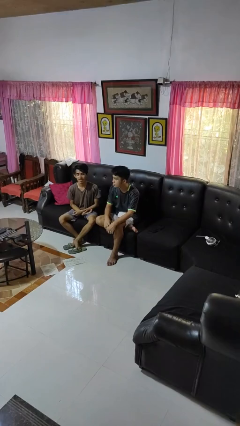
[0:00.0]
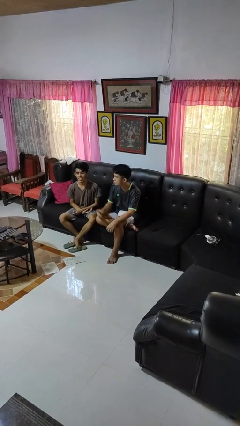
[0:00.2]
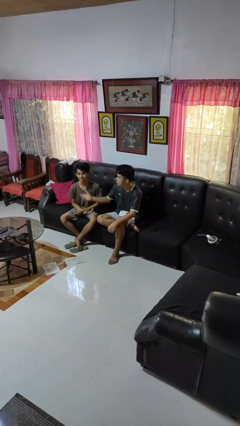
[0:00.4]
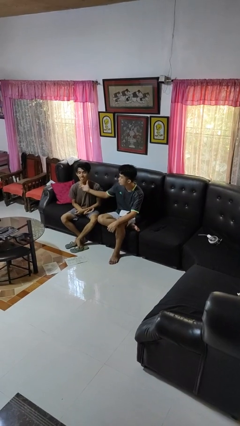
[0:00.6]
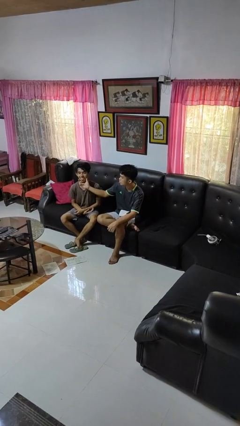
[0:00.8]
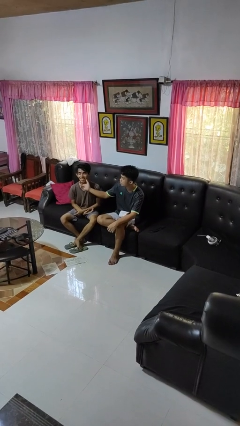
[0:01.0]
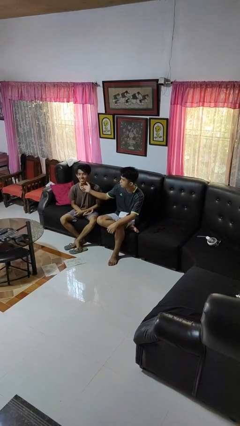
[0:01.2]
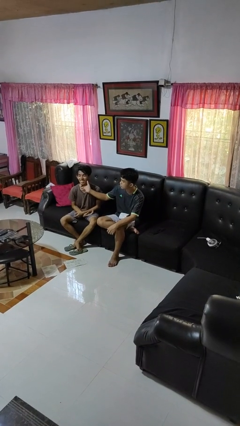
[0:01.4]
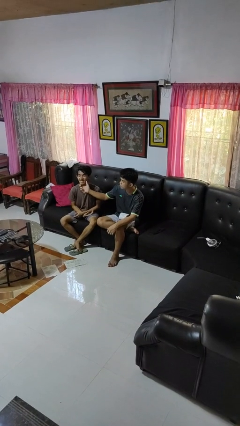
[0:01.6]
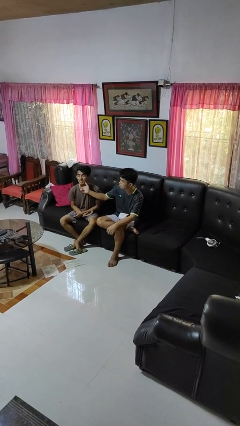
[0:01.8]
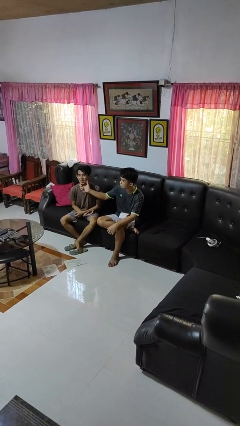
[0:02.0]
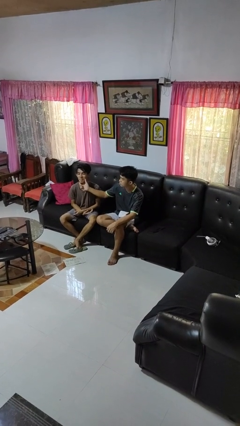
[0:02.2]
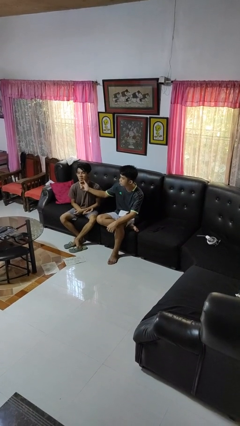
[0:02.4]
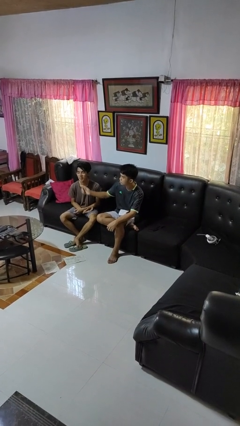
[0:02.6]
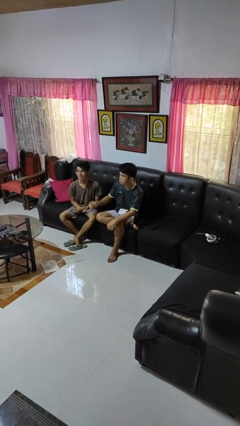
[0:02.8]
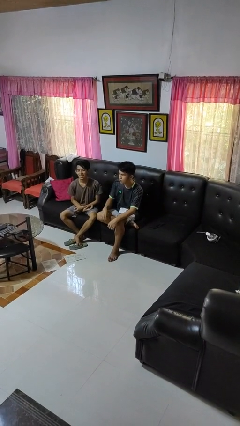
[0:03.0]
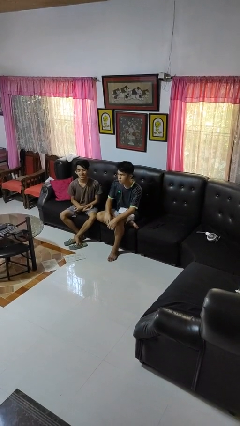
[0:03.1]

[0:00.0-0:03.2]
person touches face of person

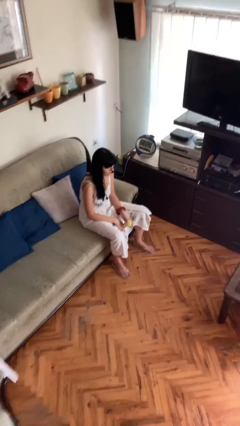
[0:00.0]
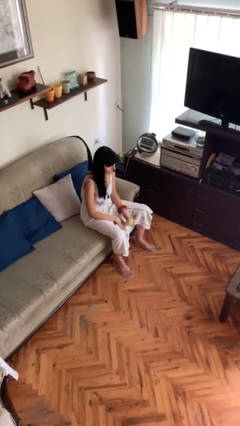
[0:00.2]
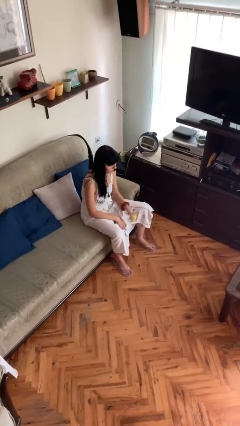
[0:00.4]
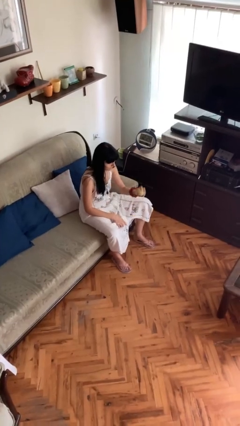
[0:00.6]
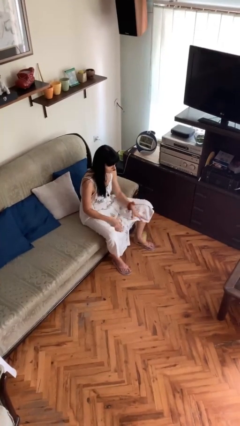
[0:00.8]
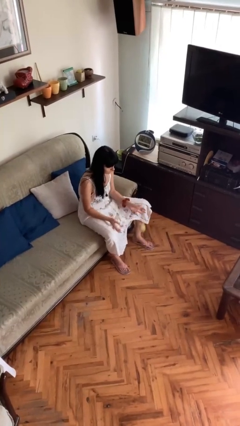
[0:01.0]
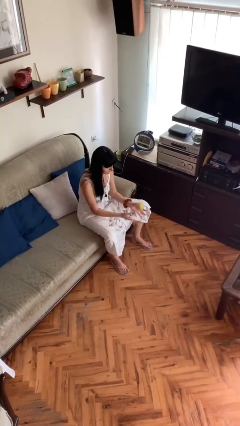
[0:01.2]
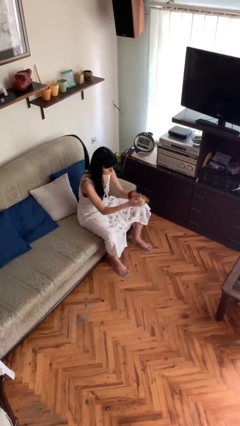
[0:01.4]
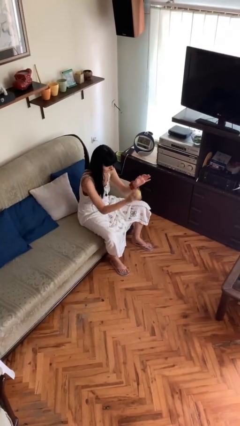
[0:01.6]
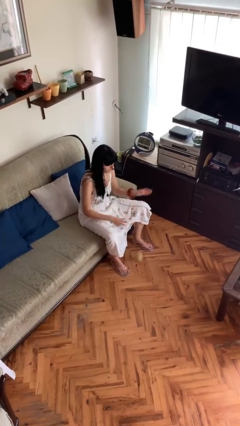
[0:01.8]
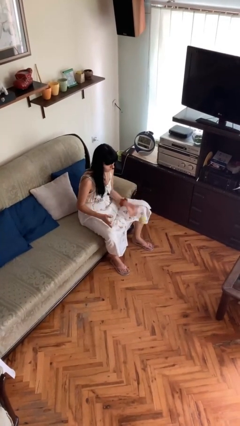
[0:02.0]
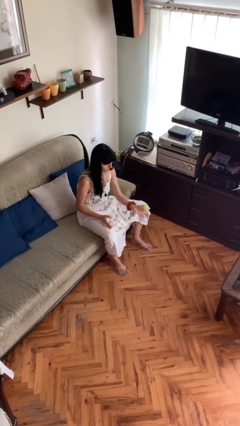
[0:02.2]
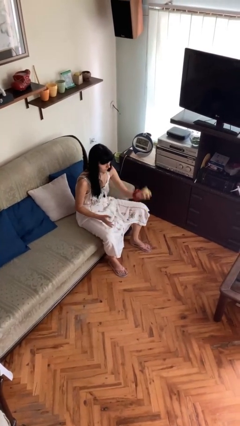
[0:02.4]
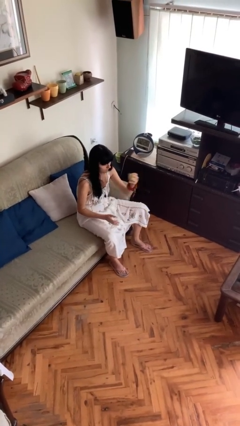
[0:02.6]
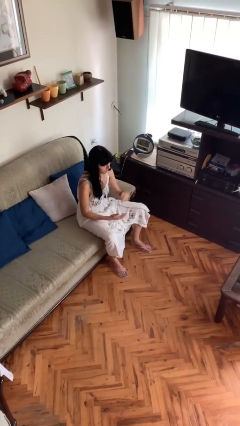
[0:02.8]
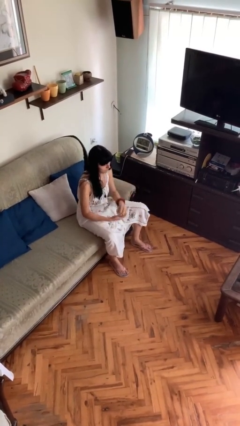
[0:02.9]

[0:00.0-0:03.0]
person bounces ball on floor

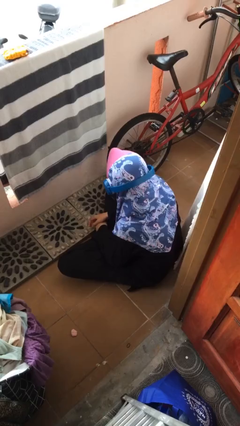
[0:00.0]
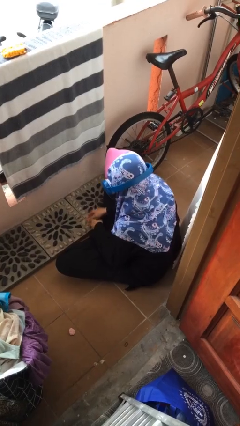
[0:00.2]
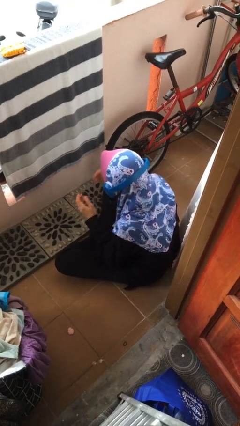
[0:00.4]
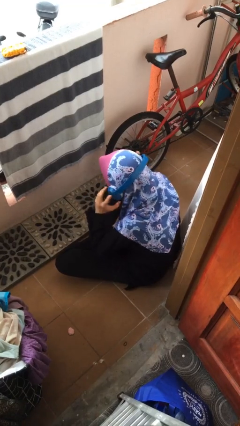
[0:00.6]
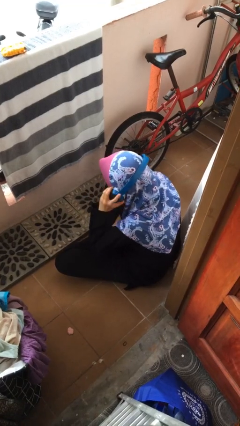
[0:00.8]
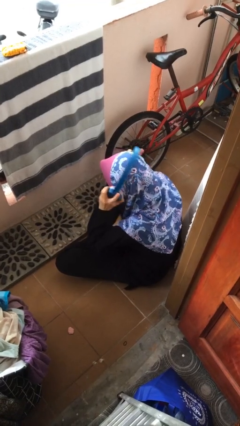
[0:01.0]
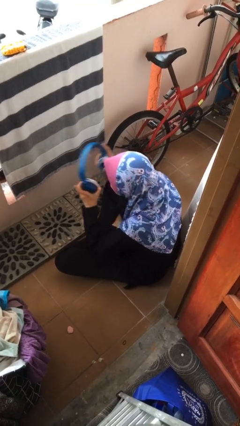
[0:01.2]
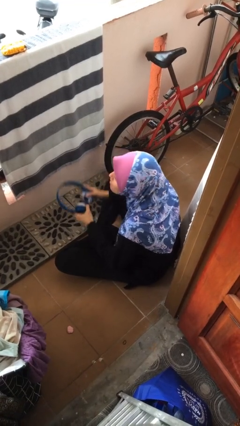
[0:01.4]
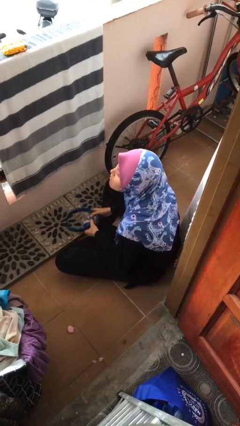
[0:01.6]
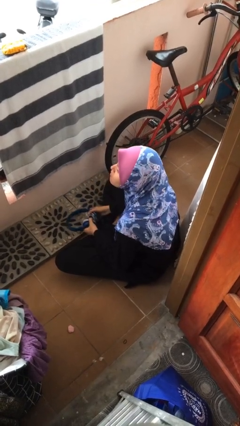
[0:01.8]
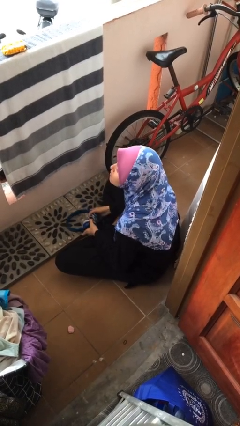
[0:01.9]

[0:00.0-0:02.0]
person takes off headphones

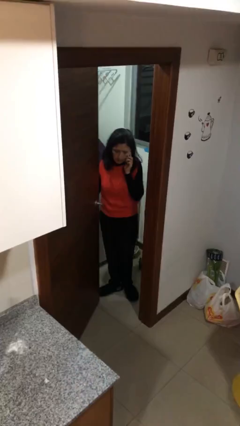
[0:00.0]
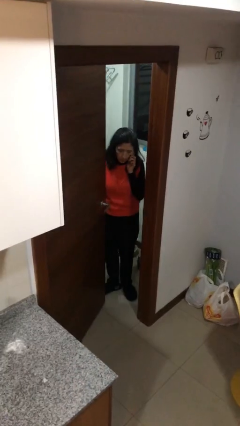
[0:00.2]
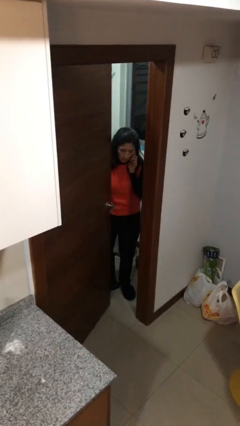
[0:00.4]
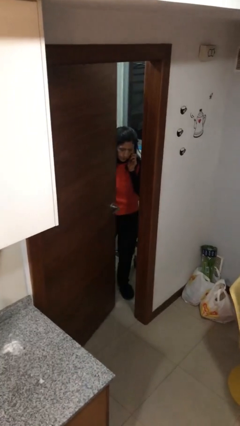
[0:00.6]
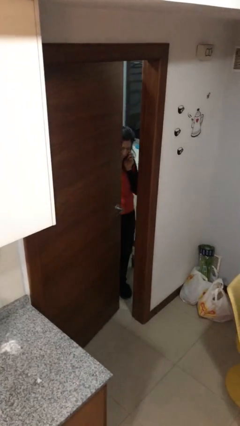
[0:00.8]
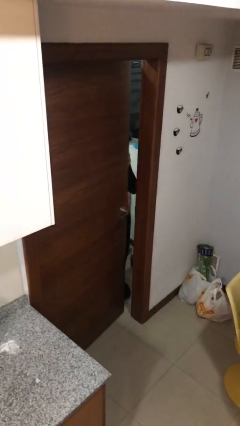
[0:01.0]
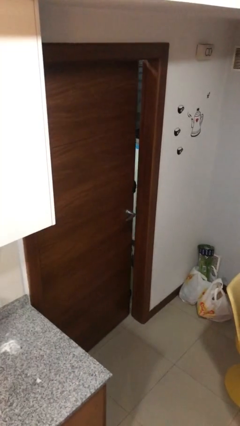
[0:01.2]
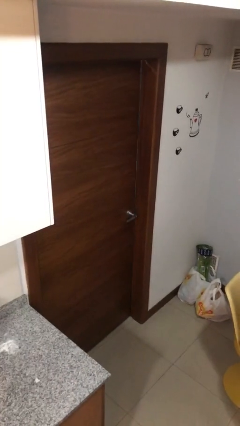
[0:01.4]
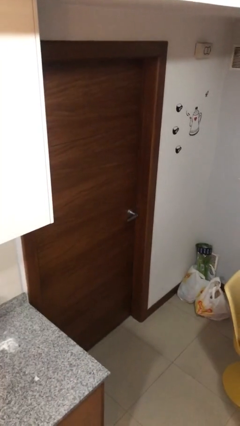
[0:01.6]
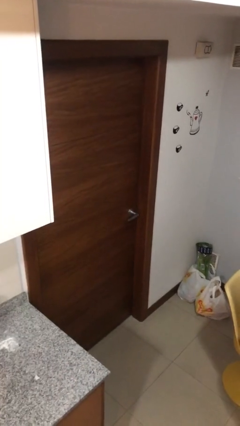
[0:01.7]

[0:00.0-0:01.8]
person closes facility door

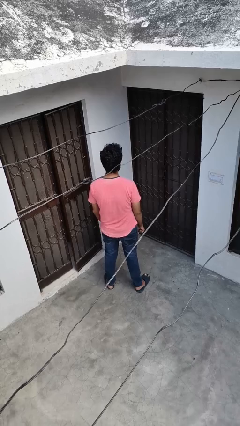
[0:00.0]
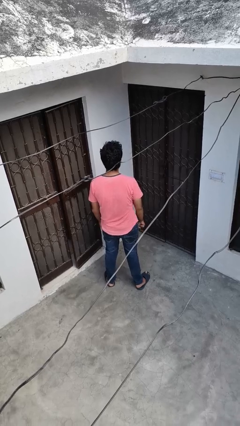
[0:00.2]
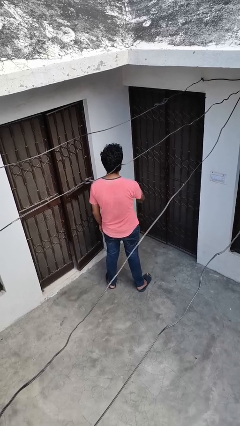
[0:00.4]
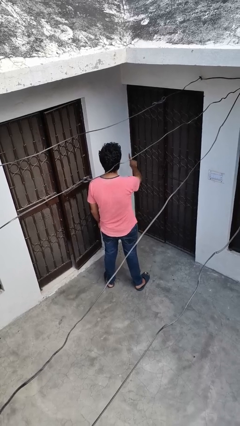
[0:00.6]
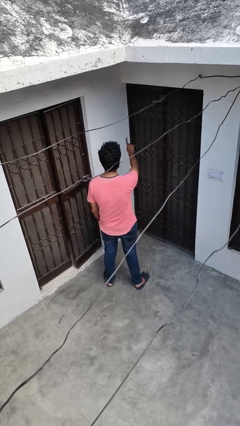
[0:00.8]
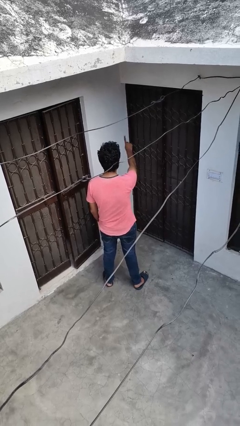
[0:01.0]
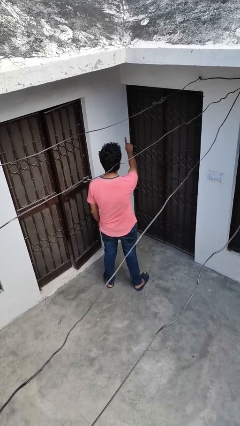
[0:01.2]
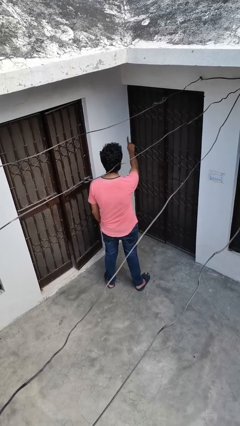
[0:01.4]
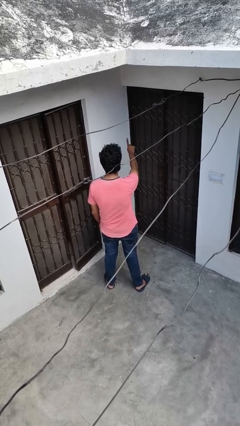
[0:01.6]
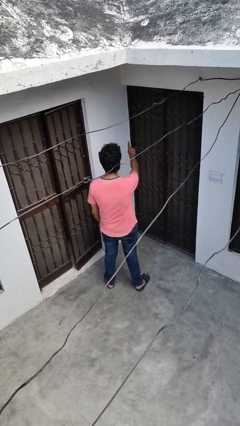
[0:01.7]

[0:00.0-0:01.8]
person gestures number one

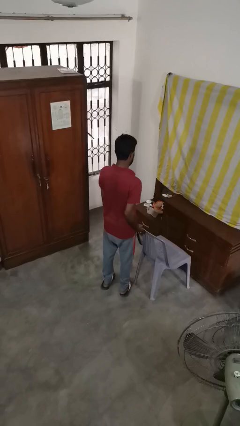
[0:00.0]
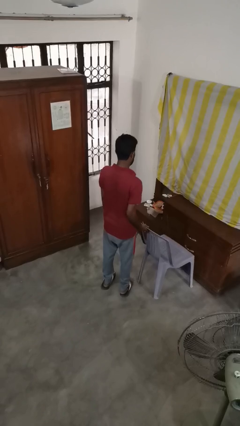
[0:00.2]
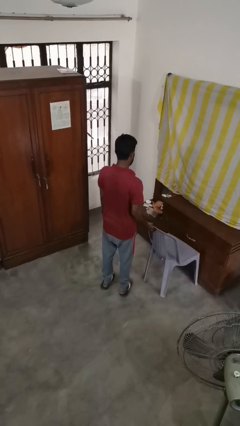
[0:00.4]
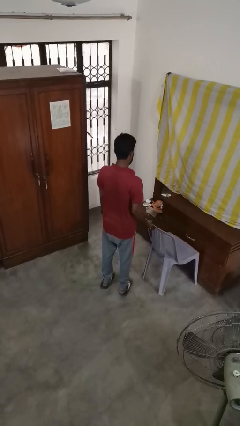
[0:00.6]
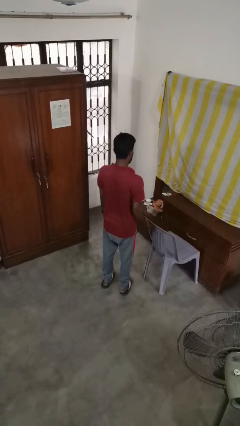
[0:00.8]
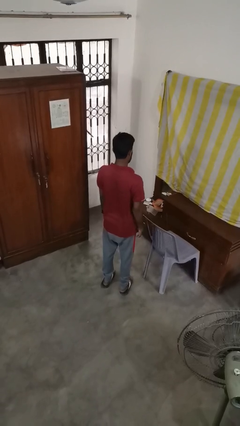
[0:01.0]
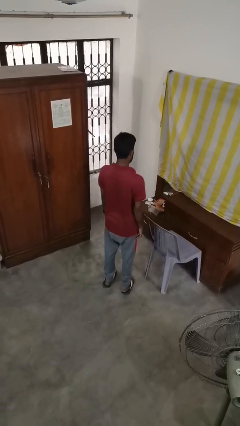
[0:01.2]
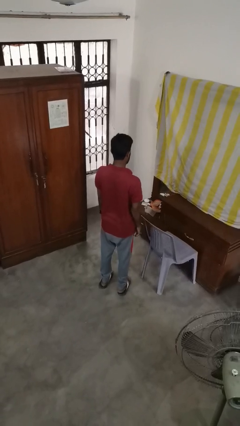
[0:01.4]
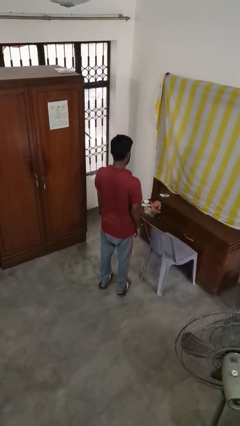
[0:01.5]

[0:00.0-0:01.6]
person pushes in chair

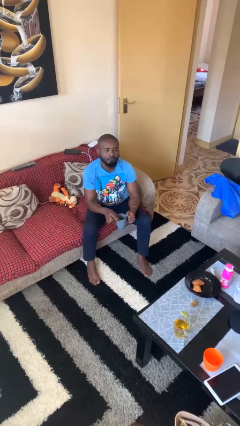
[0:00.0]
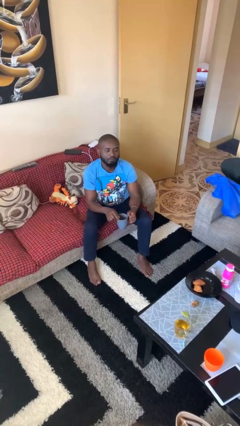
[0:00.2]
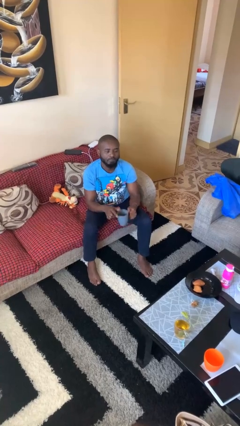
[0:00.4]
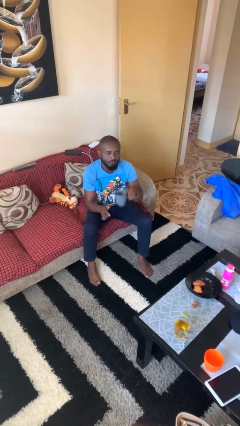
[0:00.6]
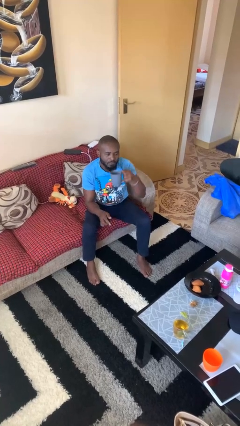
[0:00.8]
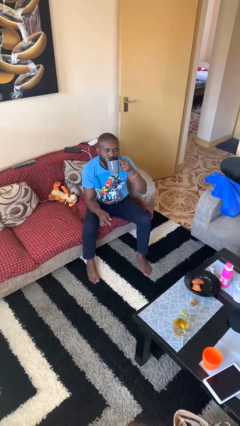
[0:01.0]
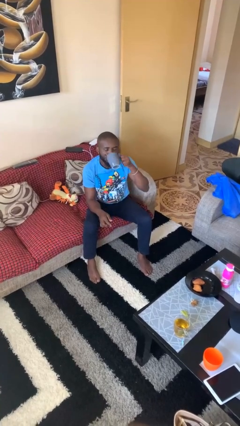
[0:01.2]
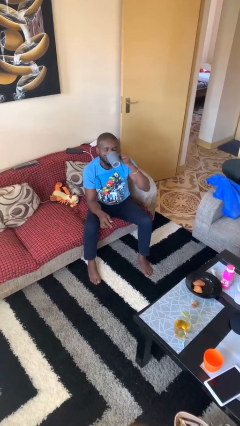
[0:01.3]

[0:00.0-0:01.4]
person drinks from mug

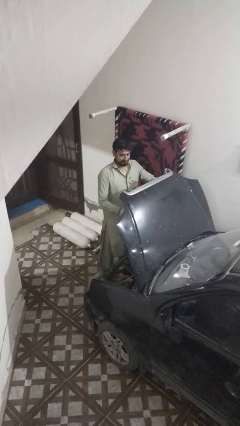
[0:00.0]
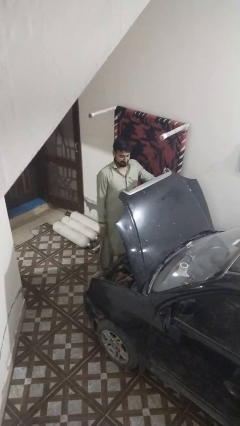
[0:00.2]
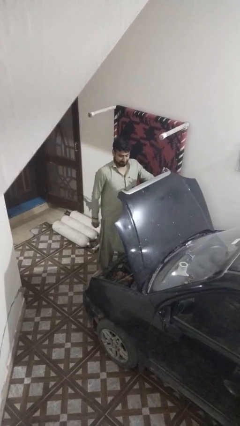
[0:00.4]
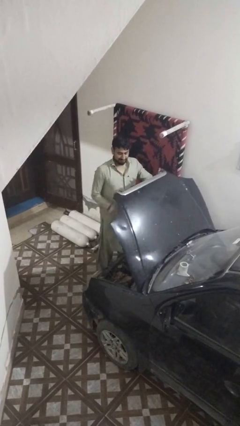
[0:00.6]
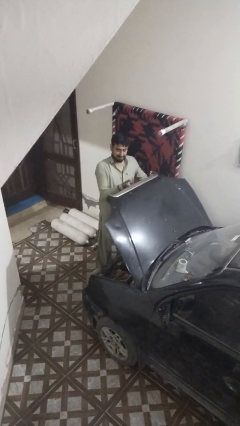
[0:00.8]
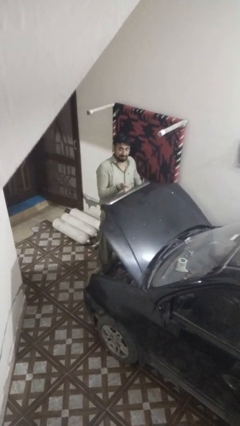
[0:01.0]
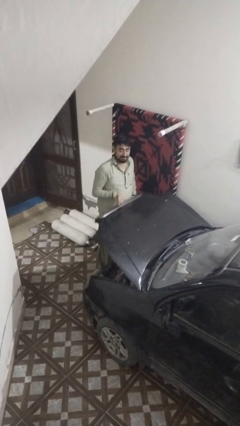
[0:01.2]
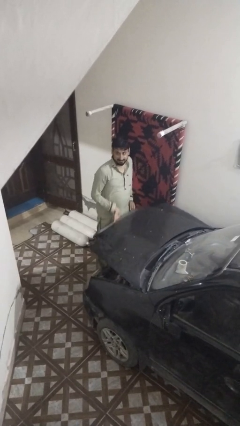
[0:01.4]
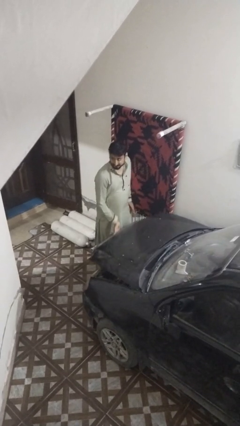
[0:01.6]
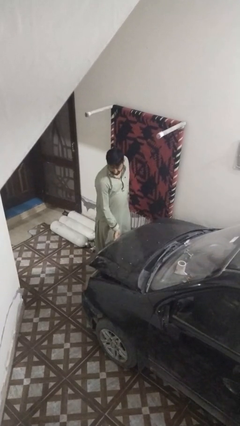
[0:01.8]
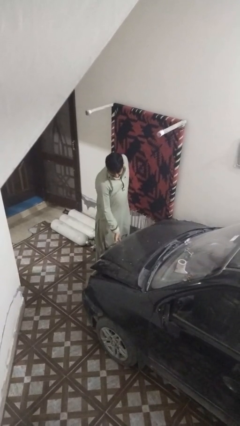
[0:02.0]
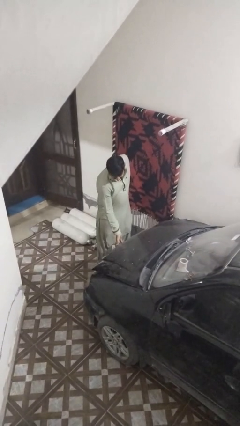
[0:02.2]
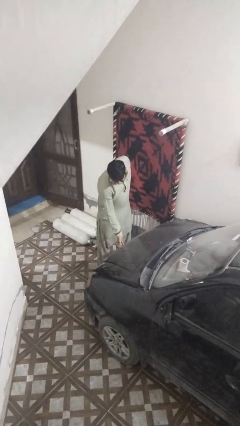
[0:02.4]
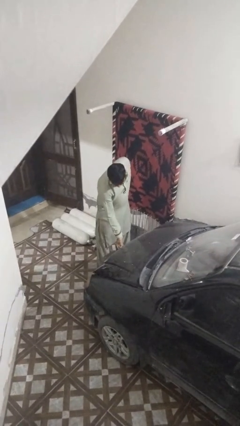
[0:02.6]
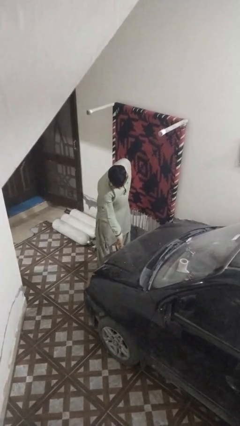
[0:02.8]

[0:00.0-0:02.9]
person closes car hood
